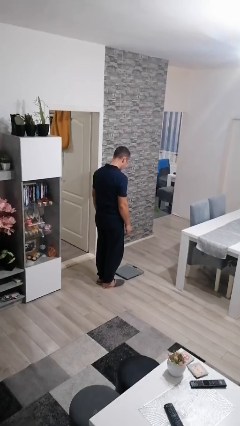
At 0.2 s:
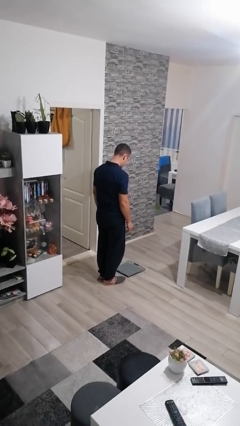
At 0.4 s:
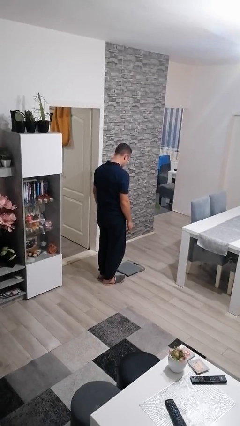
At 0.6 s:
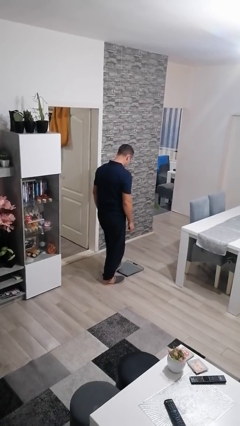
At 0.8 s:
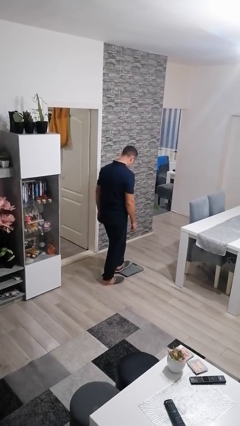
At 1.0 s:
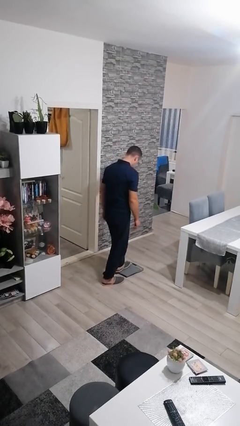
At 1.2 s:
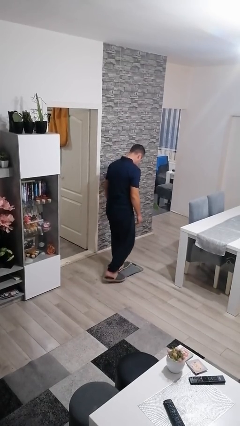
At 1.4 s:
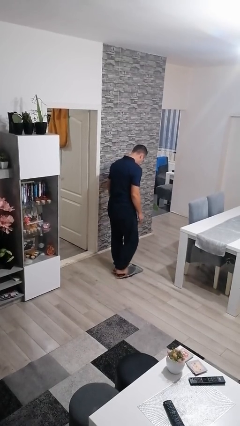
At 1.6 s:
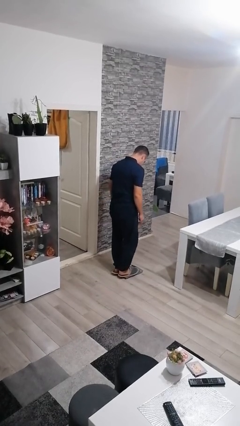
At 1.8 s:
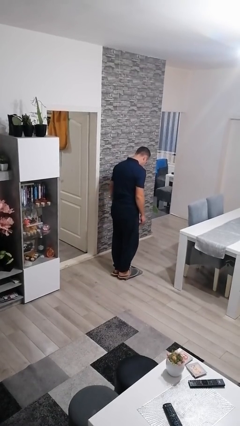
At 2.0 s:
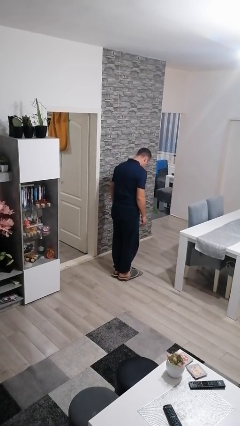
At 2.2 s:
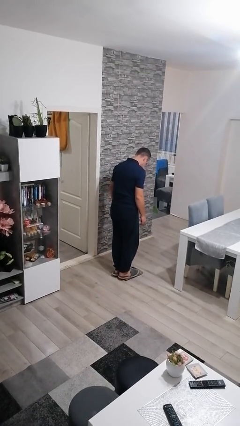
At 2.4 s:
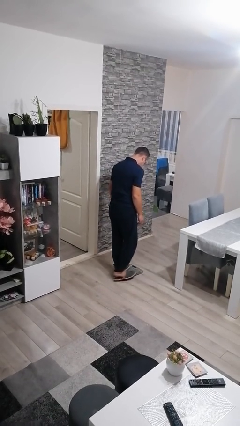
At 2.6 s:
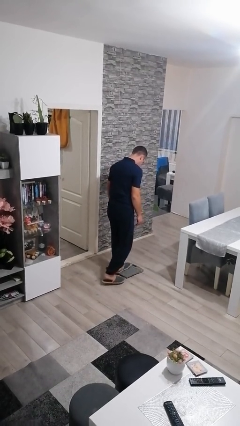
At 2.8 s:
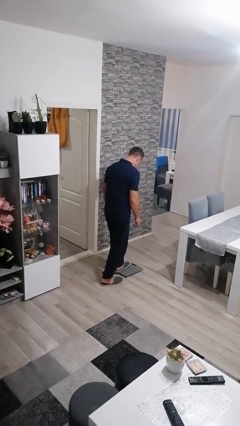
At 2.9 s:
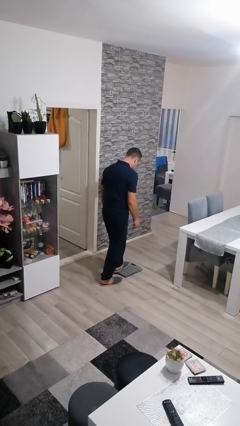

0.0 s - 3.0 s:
person uses bodyweight scale

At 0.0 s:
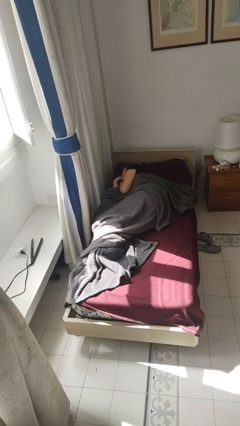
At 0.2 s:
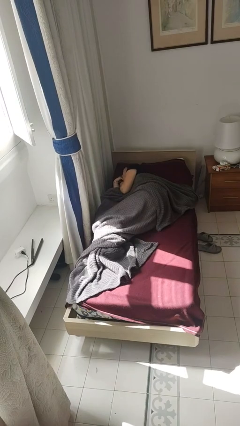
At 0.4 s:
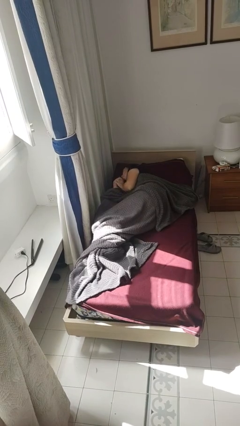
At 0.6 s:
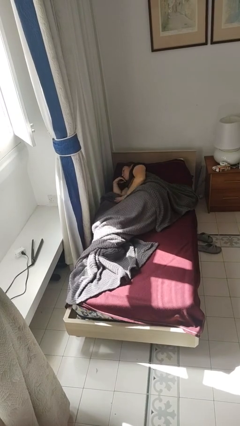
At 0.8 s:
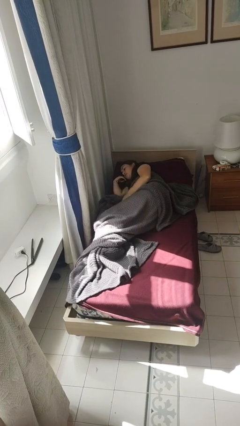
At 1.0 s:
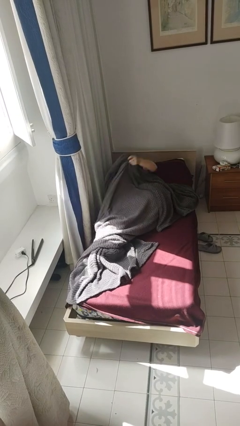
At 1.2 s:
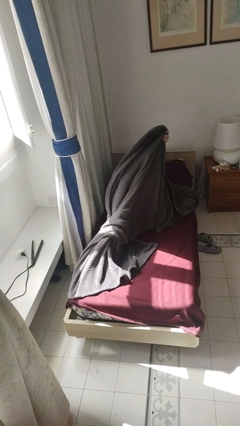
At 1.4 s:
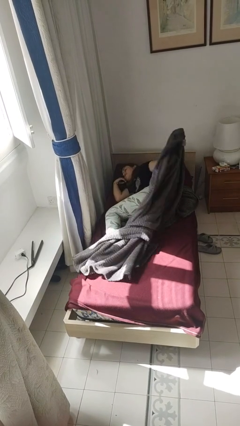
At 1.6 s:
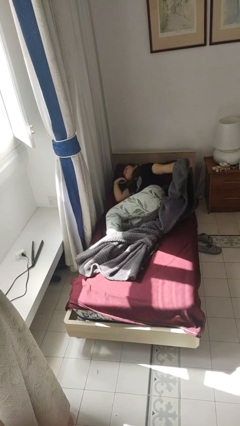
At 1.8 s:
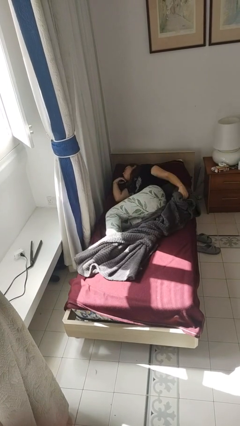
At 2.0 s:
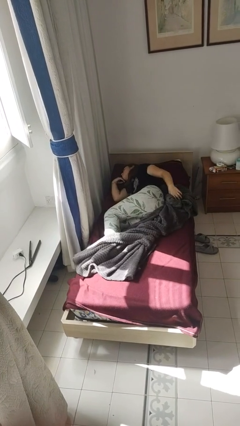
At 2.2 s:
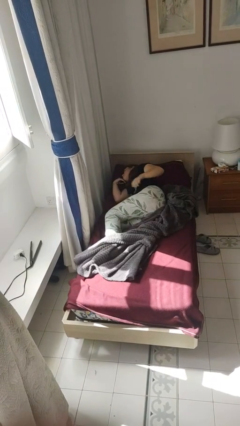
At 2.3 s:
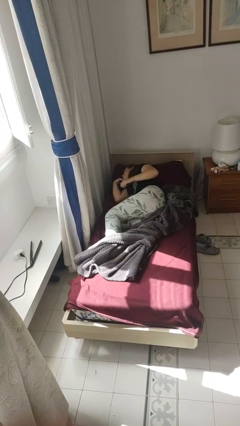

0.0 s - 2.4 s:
person uncovers with bedsheets

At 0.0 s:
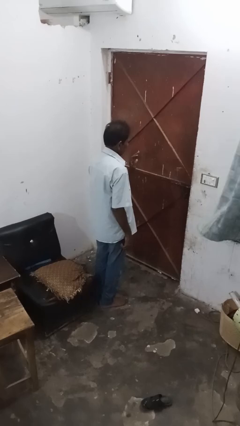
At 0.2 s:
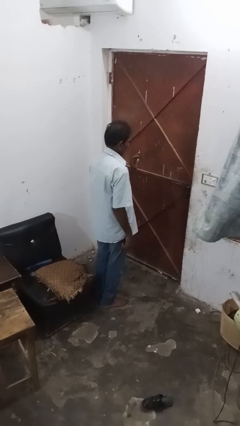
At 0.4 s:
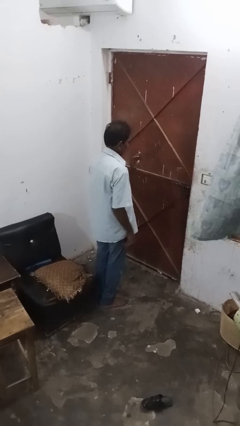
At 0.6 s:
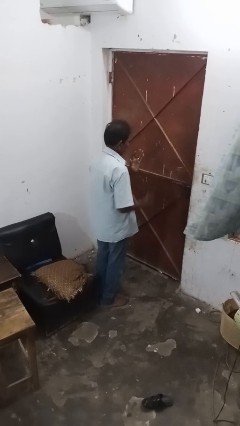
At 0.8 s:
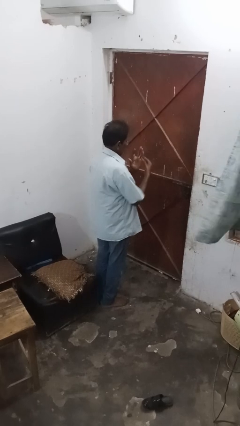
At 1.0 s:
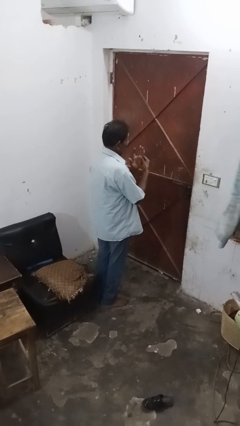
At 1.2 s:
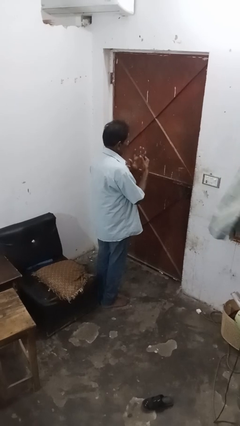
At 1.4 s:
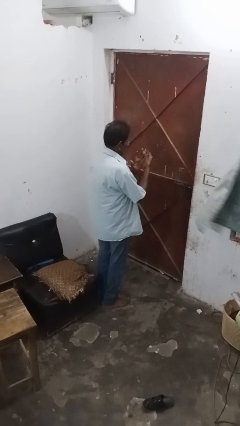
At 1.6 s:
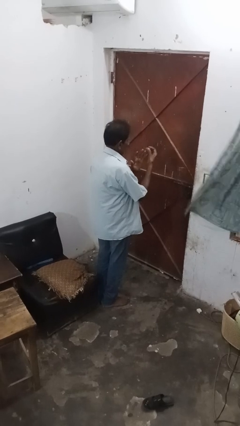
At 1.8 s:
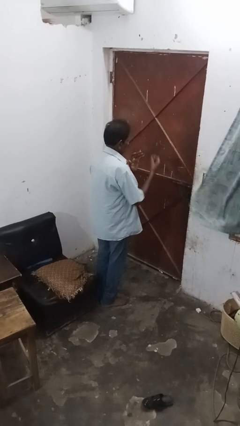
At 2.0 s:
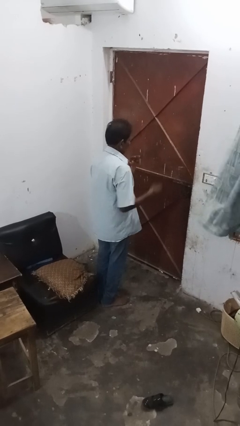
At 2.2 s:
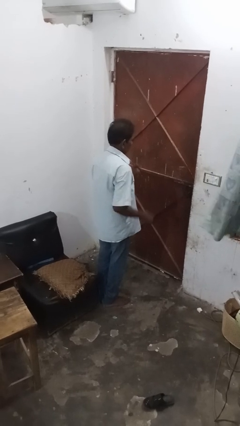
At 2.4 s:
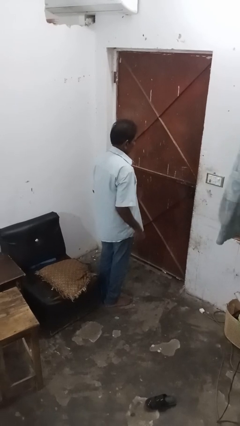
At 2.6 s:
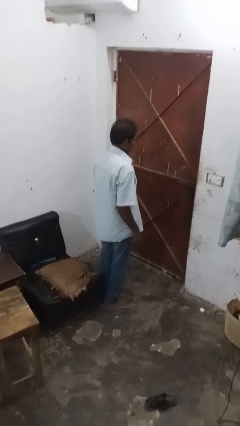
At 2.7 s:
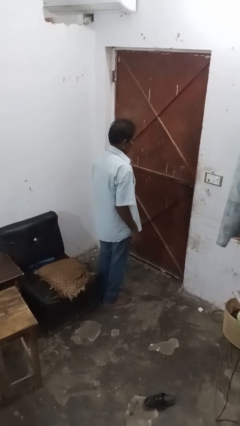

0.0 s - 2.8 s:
person takes off ring

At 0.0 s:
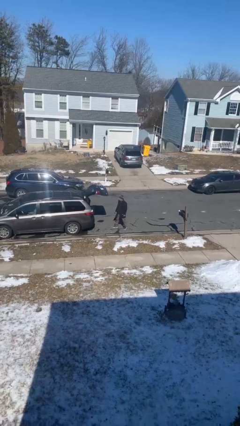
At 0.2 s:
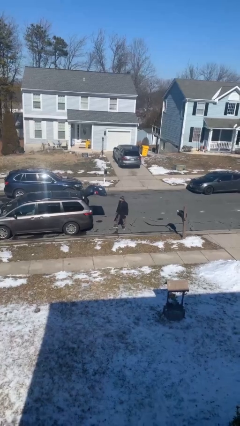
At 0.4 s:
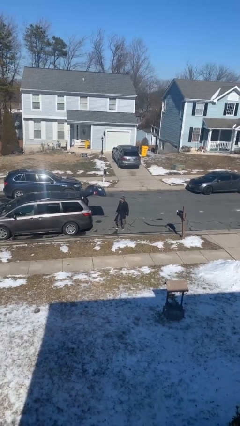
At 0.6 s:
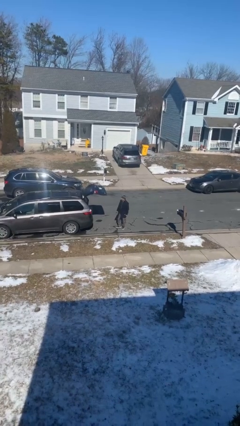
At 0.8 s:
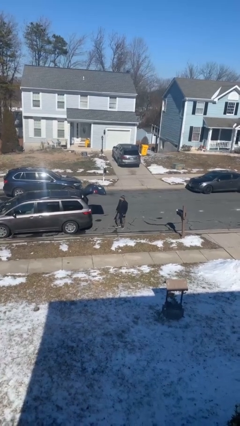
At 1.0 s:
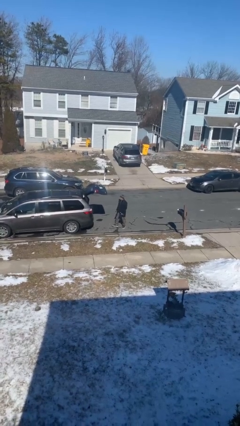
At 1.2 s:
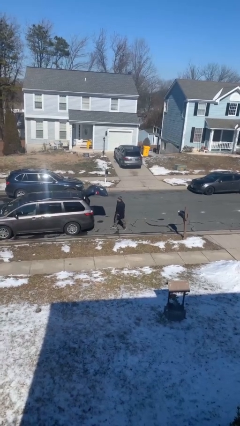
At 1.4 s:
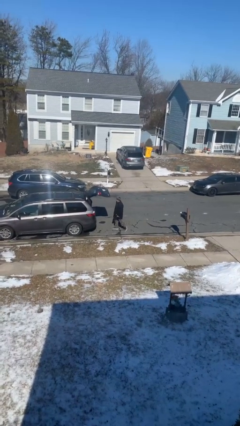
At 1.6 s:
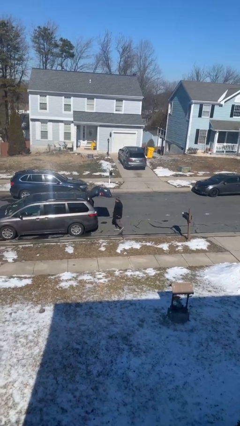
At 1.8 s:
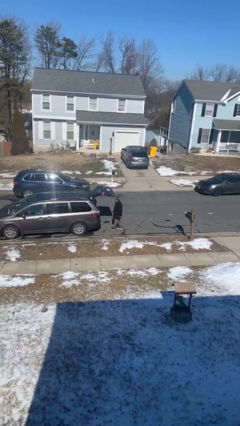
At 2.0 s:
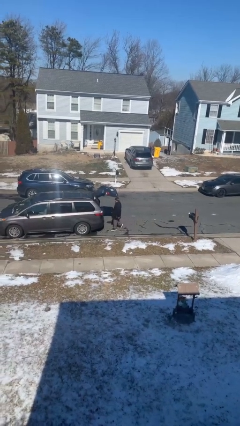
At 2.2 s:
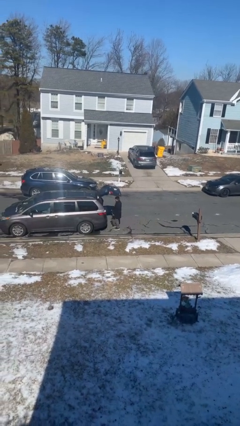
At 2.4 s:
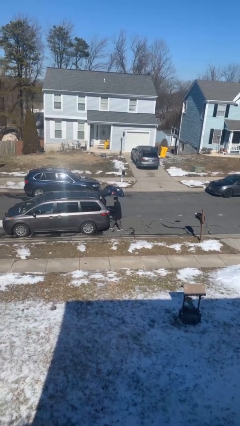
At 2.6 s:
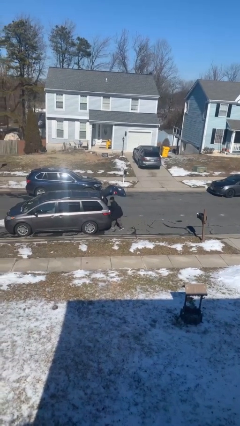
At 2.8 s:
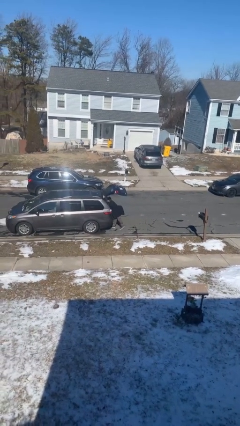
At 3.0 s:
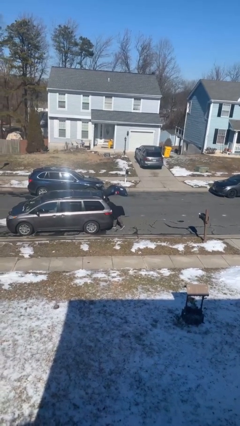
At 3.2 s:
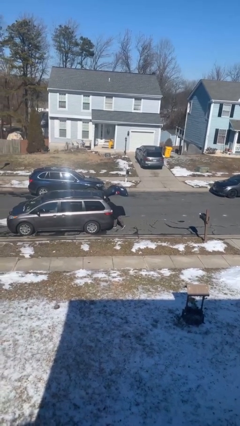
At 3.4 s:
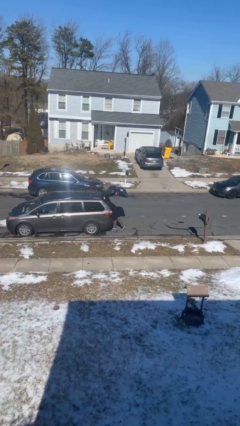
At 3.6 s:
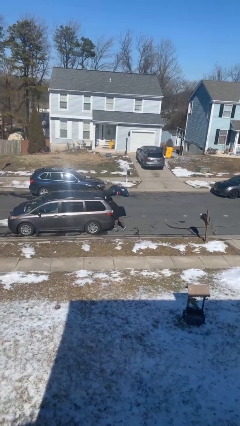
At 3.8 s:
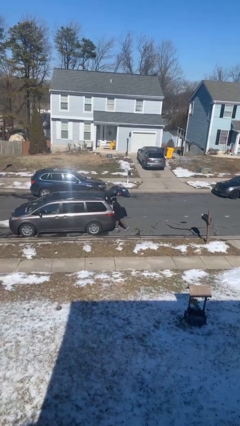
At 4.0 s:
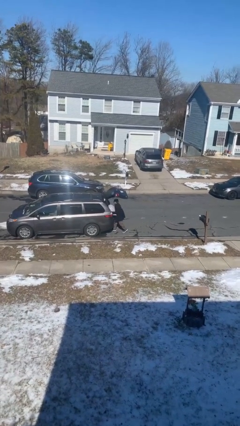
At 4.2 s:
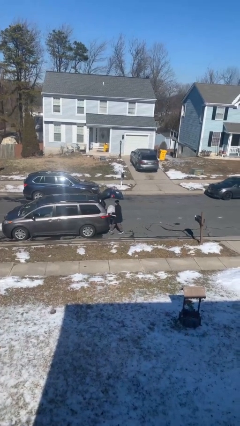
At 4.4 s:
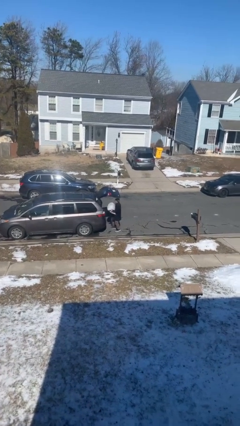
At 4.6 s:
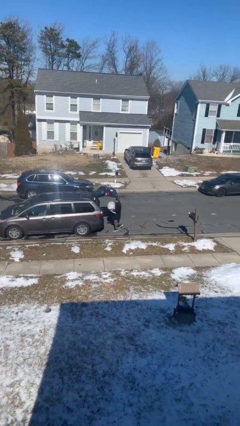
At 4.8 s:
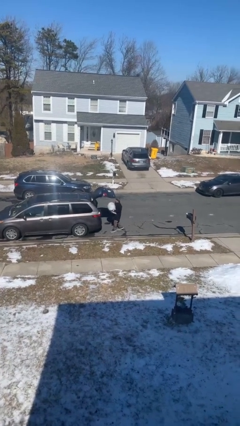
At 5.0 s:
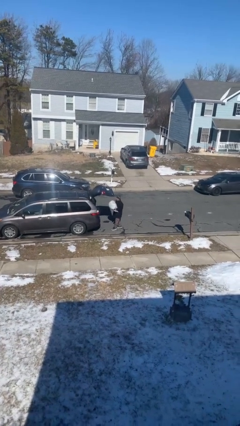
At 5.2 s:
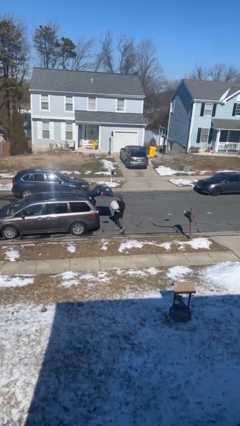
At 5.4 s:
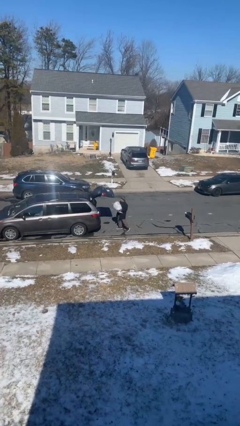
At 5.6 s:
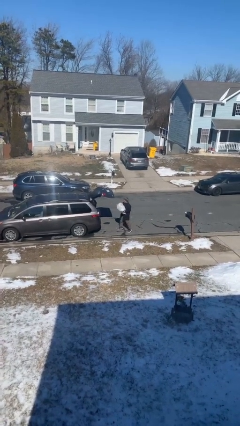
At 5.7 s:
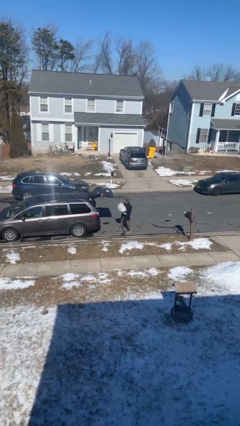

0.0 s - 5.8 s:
person unloads car

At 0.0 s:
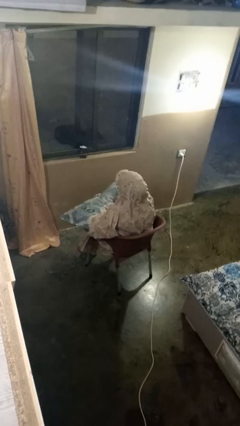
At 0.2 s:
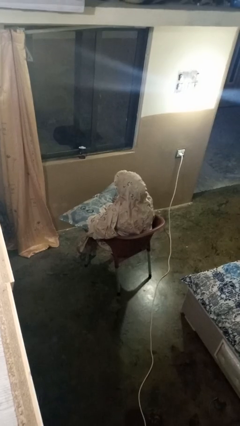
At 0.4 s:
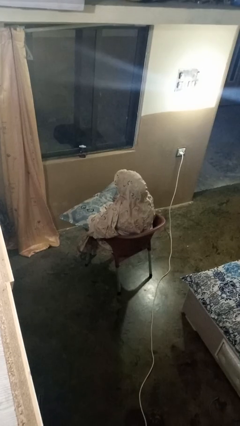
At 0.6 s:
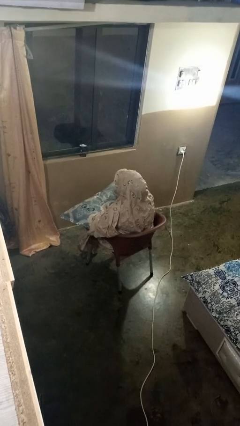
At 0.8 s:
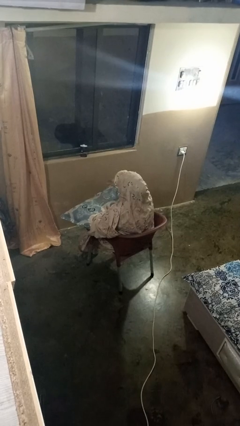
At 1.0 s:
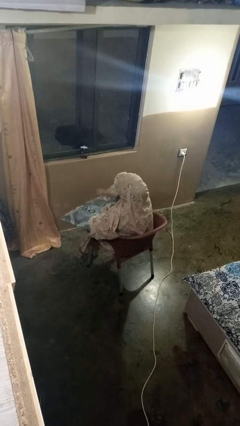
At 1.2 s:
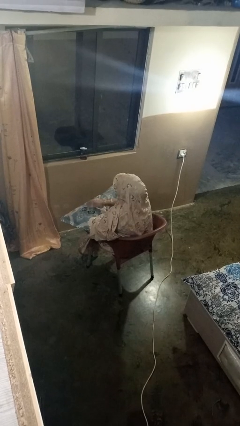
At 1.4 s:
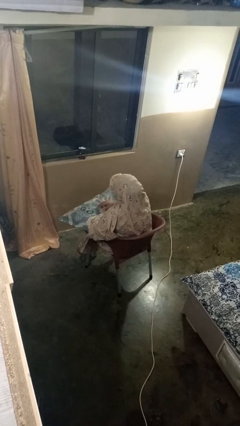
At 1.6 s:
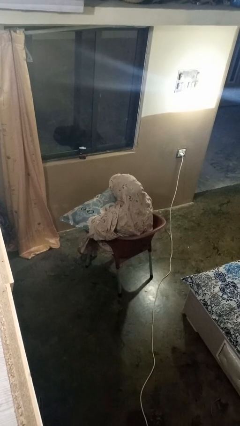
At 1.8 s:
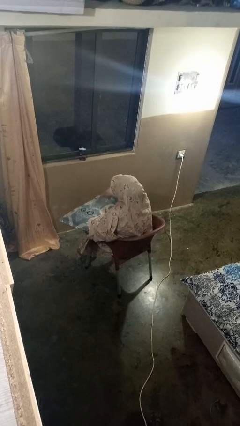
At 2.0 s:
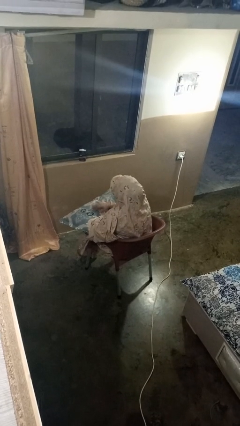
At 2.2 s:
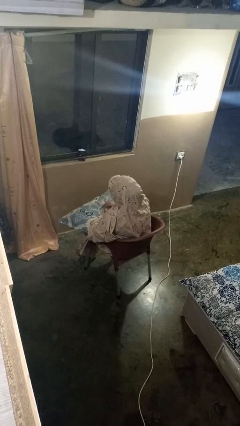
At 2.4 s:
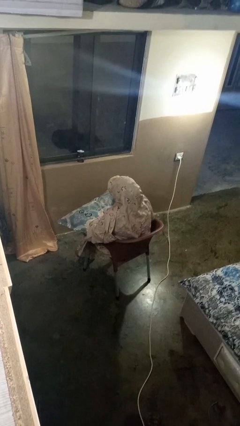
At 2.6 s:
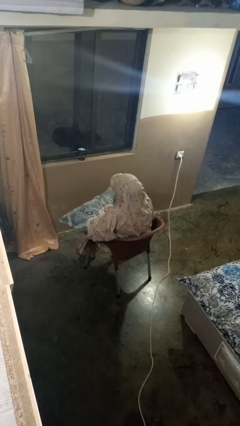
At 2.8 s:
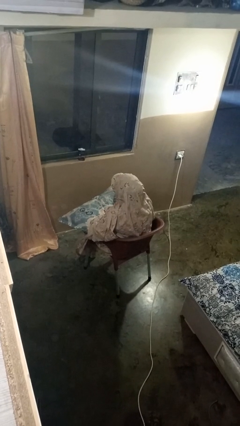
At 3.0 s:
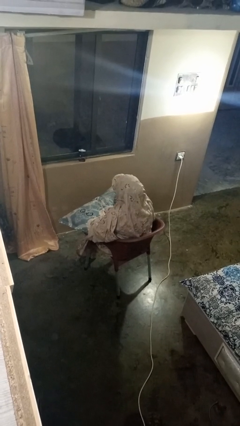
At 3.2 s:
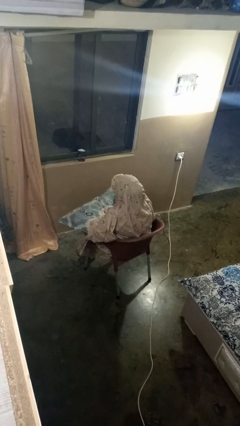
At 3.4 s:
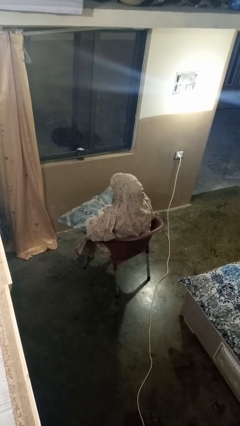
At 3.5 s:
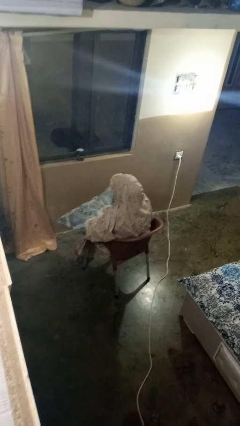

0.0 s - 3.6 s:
person waves hand over object
